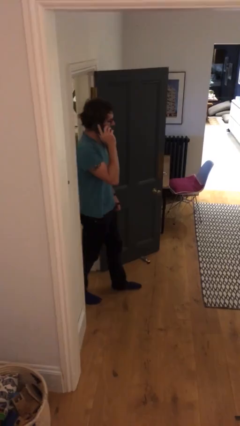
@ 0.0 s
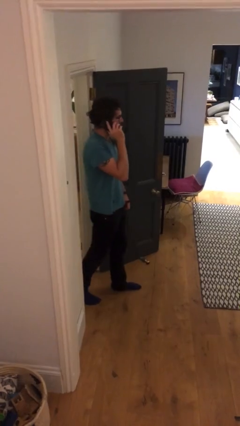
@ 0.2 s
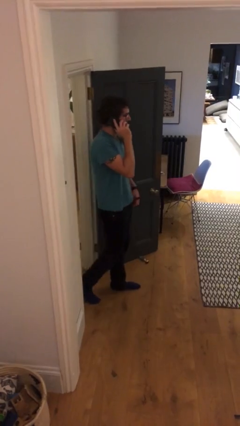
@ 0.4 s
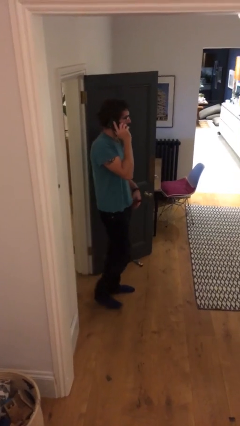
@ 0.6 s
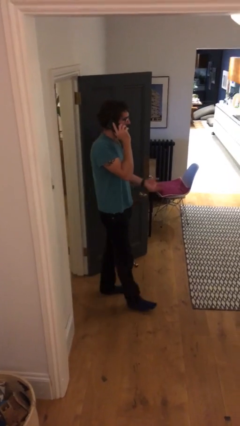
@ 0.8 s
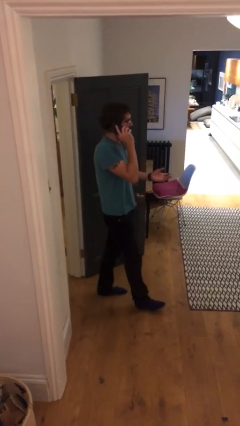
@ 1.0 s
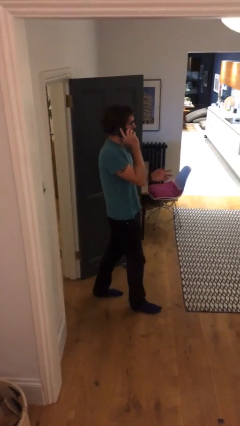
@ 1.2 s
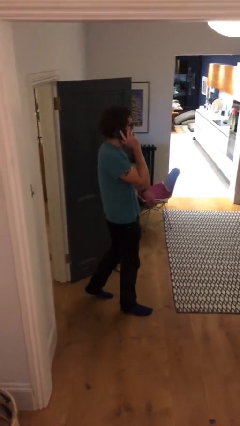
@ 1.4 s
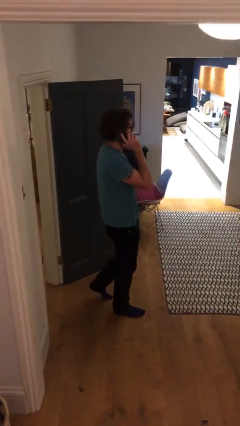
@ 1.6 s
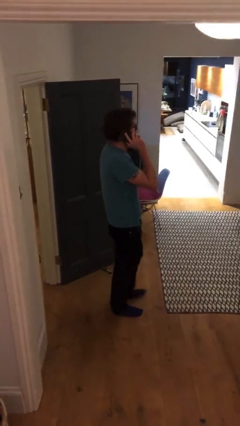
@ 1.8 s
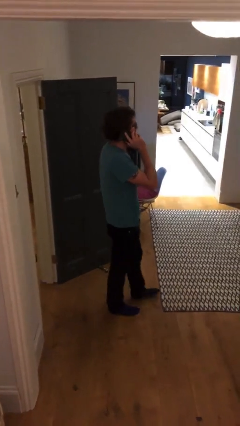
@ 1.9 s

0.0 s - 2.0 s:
person enters scene through structure

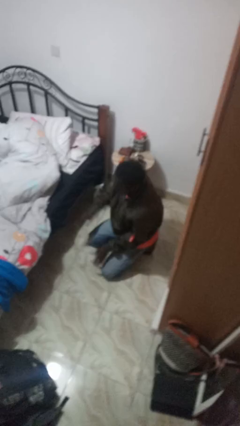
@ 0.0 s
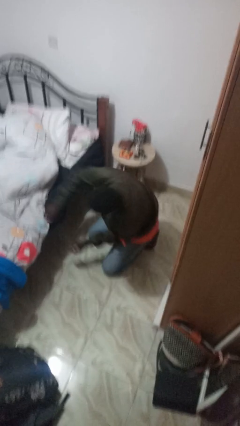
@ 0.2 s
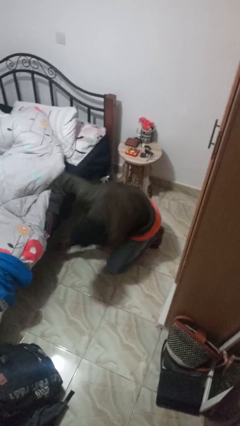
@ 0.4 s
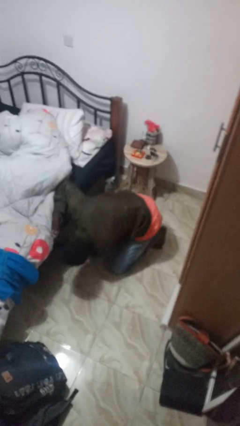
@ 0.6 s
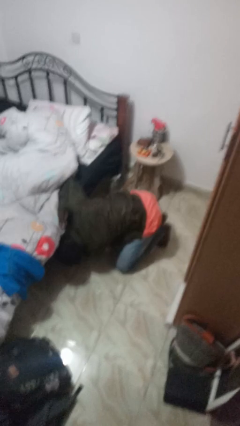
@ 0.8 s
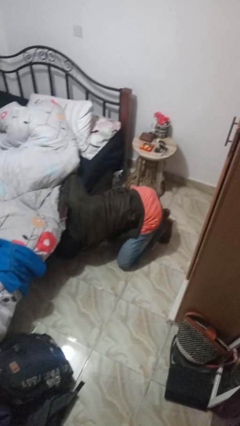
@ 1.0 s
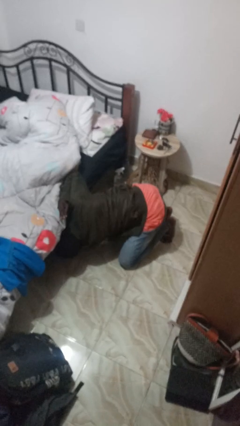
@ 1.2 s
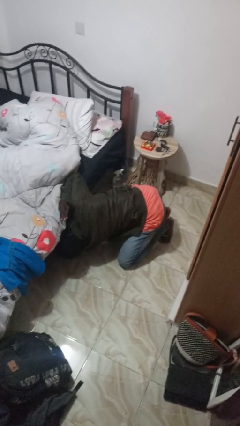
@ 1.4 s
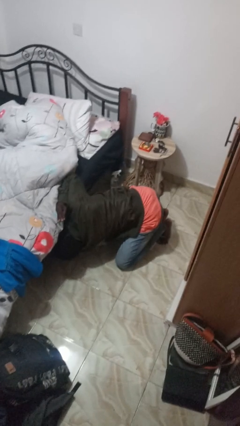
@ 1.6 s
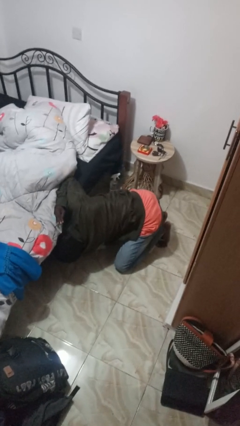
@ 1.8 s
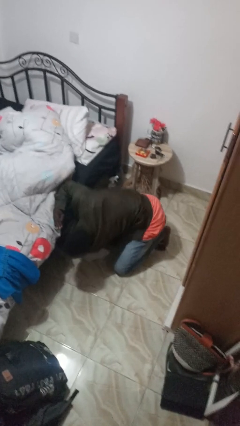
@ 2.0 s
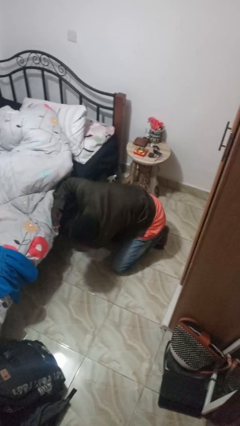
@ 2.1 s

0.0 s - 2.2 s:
person searches under bed

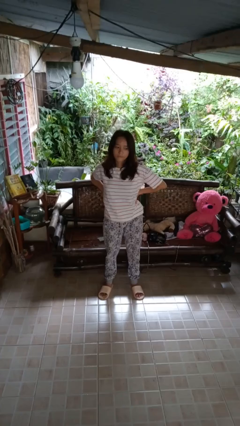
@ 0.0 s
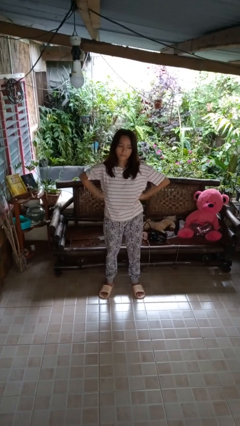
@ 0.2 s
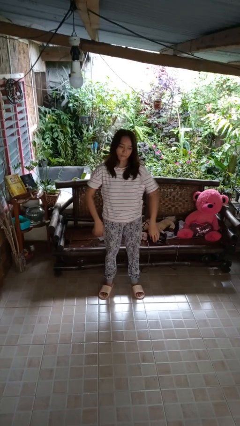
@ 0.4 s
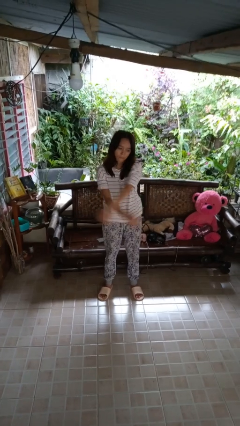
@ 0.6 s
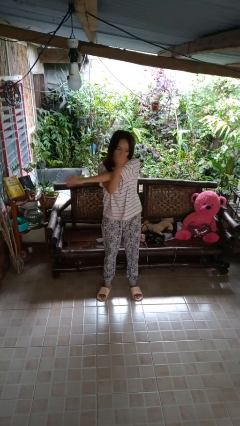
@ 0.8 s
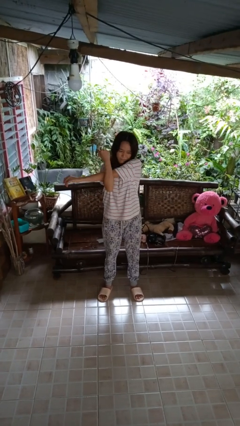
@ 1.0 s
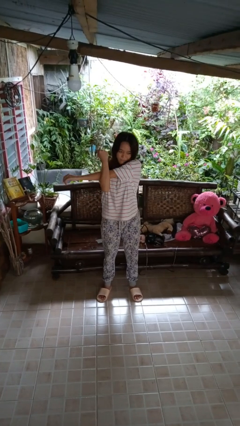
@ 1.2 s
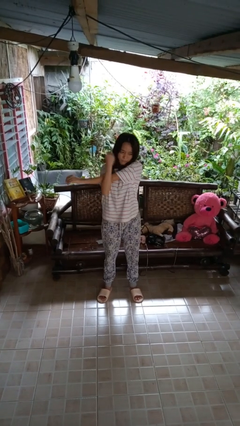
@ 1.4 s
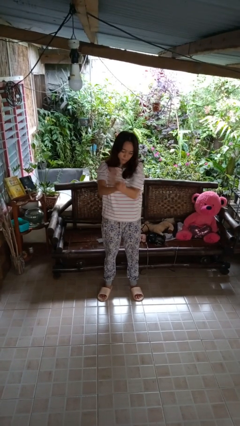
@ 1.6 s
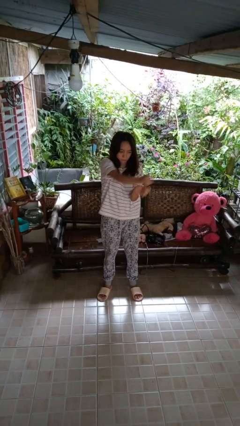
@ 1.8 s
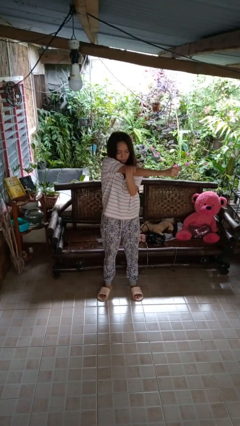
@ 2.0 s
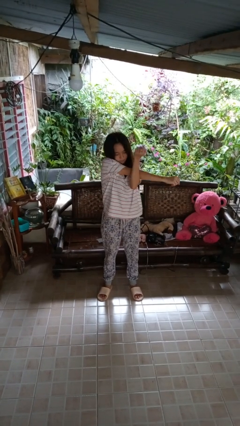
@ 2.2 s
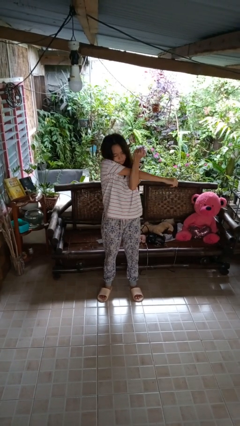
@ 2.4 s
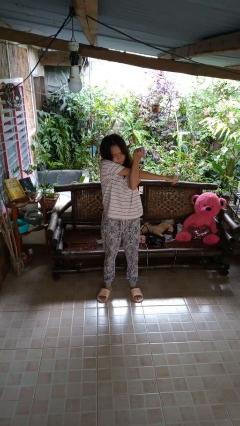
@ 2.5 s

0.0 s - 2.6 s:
person stretches arms to side

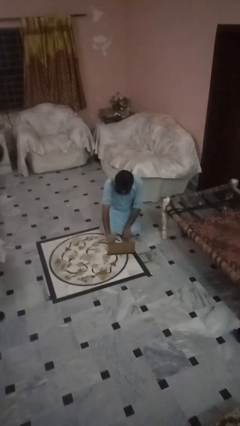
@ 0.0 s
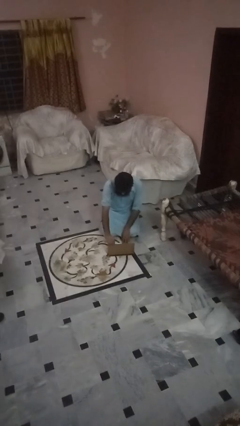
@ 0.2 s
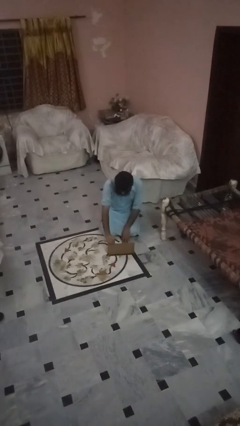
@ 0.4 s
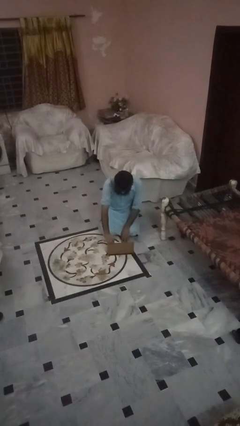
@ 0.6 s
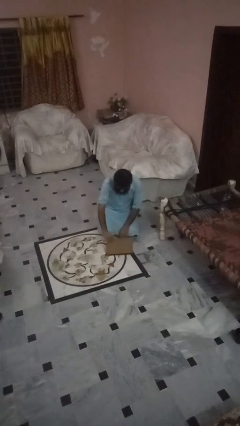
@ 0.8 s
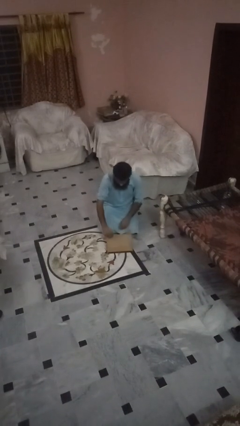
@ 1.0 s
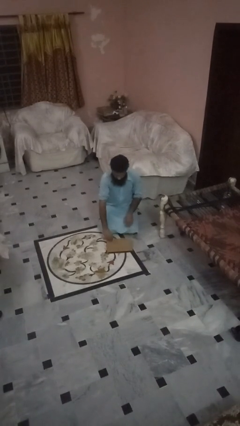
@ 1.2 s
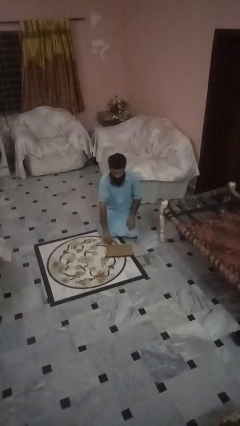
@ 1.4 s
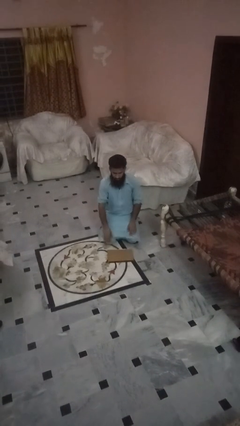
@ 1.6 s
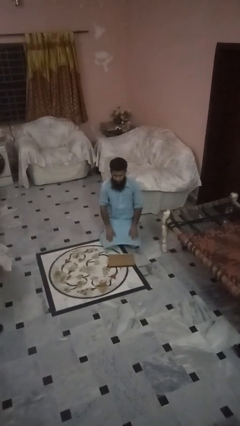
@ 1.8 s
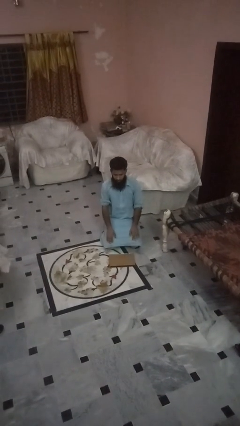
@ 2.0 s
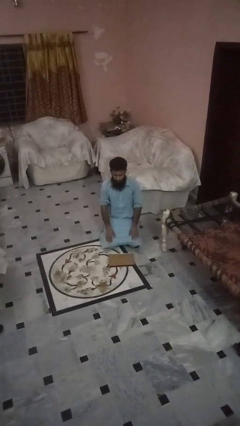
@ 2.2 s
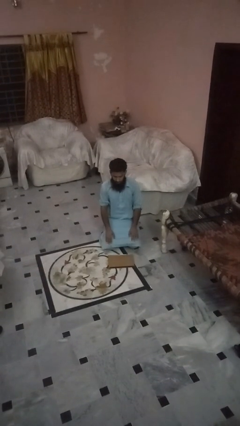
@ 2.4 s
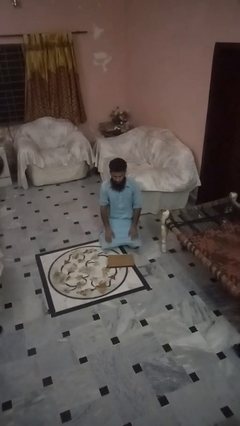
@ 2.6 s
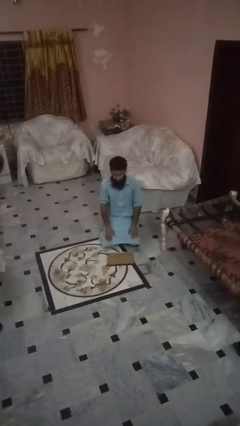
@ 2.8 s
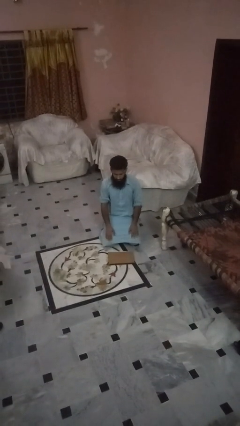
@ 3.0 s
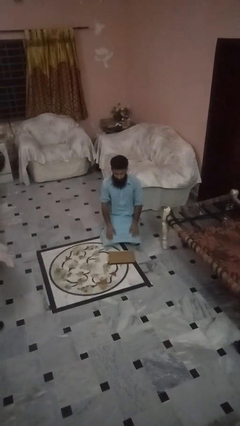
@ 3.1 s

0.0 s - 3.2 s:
person closes laptop

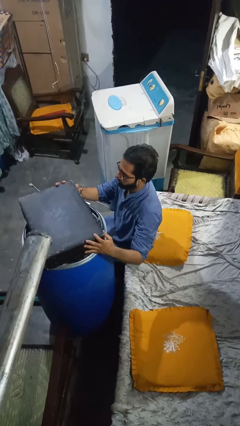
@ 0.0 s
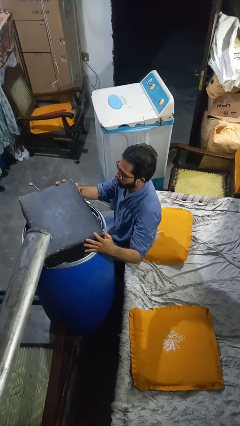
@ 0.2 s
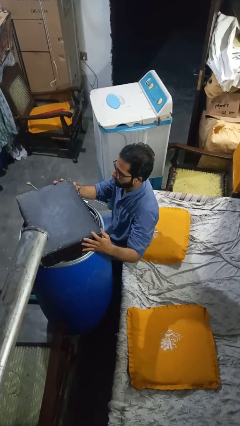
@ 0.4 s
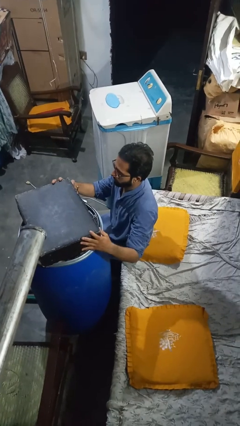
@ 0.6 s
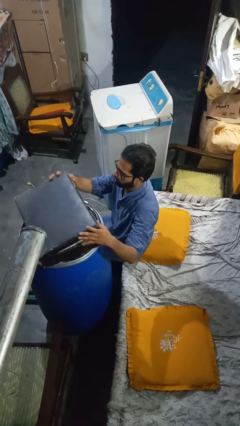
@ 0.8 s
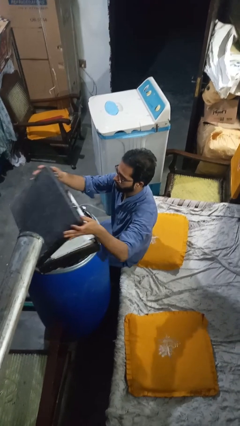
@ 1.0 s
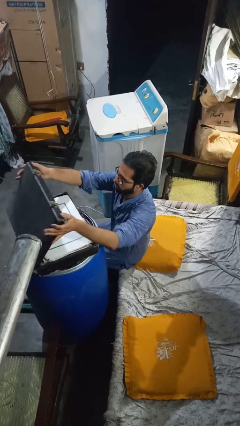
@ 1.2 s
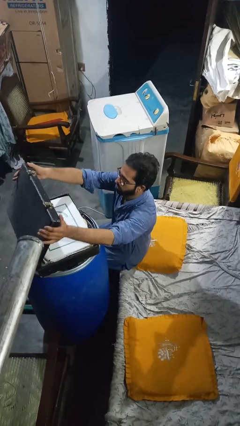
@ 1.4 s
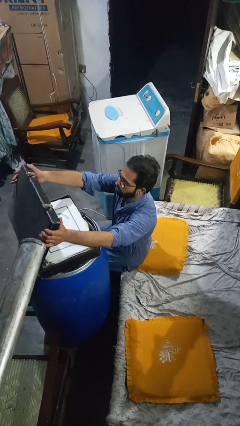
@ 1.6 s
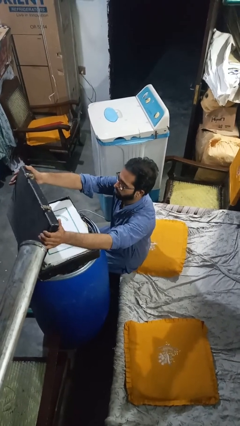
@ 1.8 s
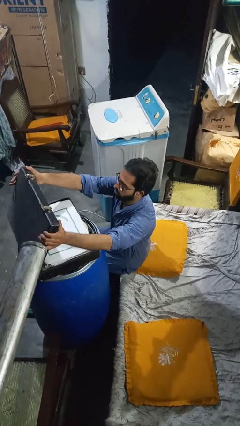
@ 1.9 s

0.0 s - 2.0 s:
person opens suitcase

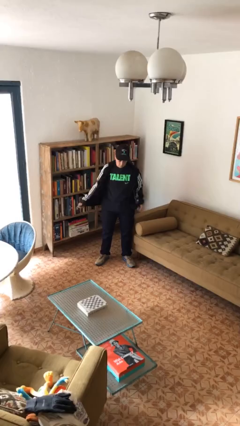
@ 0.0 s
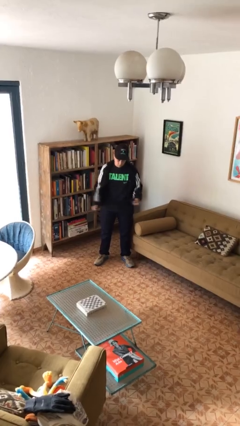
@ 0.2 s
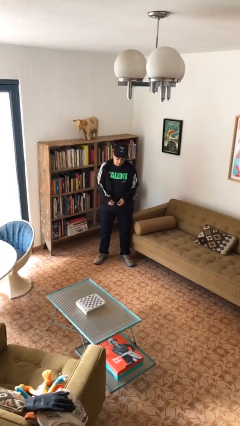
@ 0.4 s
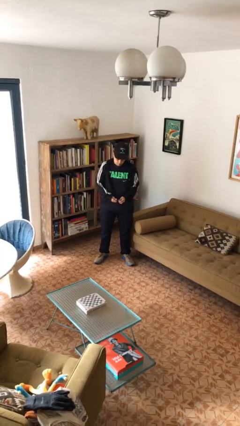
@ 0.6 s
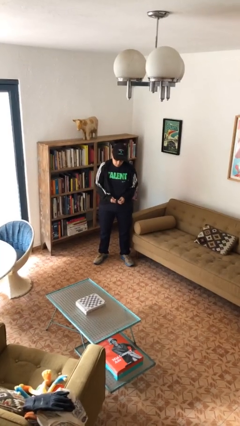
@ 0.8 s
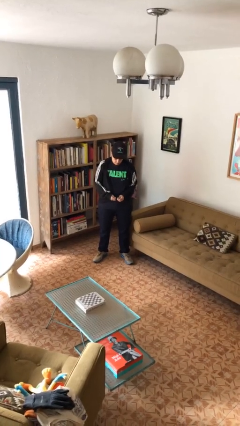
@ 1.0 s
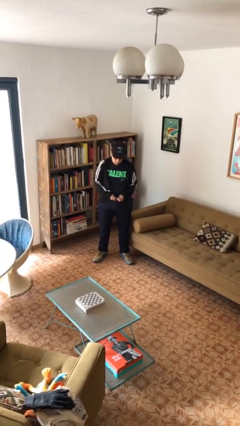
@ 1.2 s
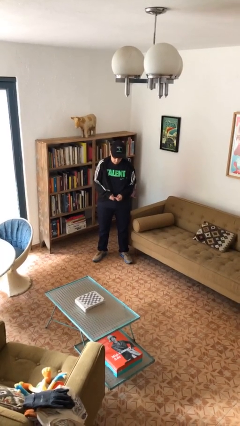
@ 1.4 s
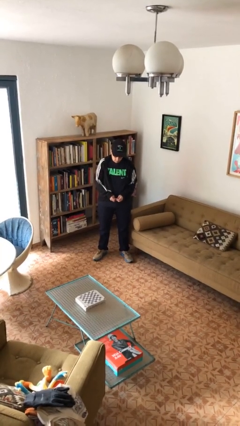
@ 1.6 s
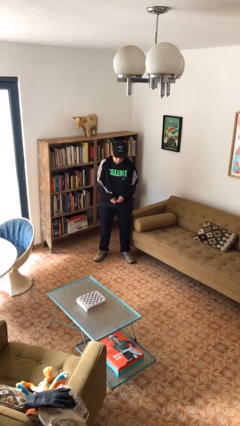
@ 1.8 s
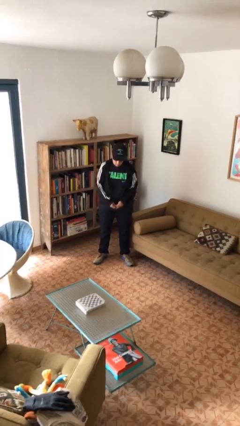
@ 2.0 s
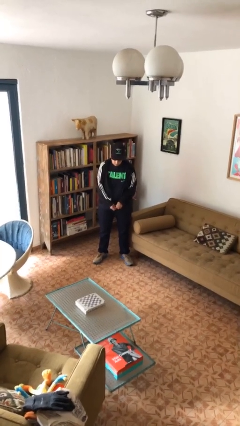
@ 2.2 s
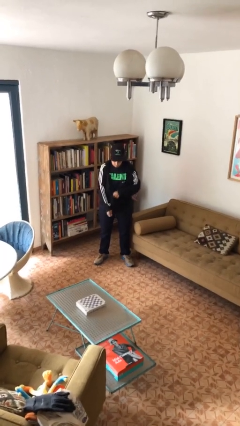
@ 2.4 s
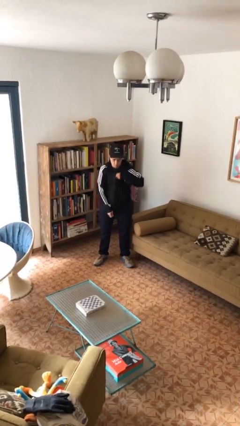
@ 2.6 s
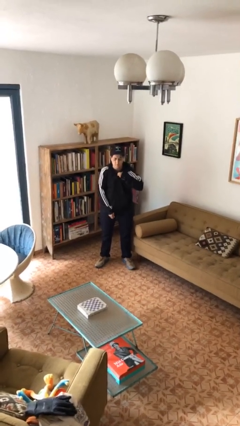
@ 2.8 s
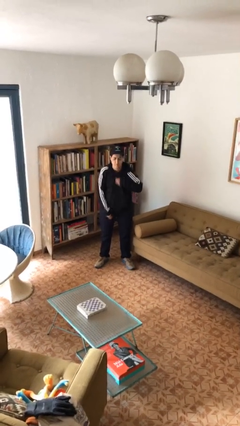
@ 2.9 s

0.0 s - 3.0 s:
person zips up jacket

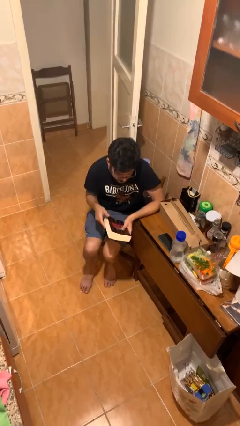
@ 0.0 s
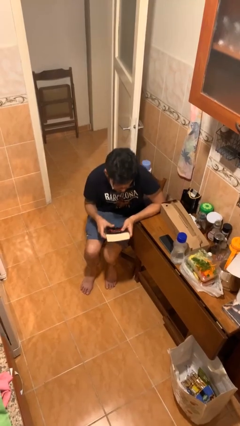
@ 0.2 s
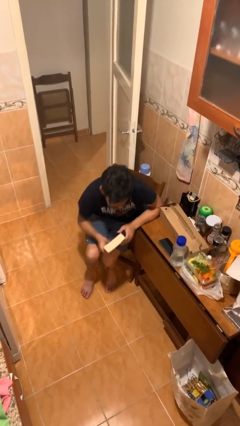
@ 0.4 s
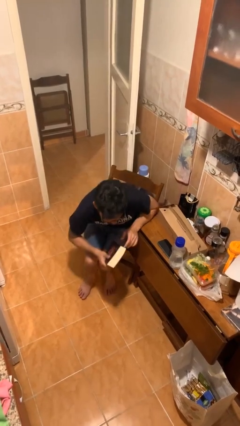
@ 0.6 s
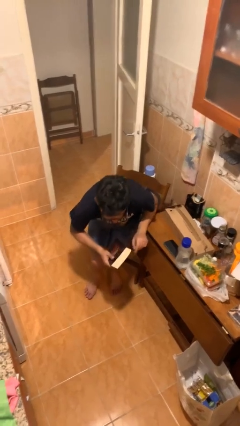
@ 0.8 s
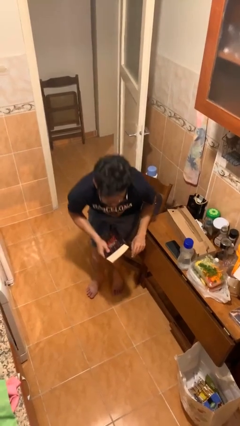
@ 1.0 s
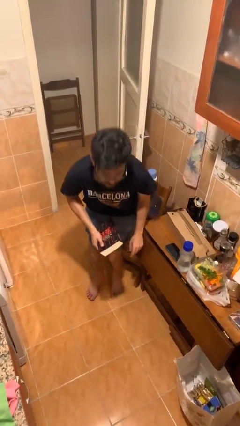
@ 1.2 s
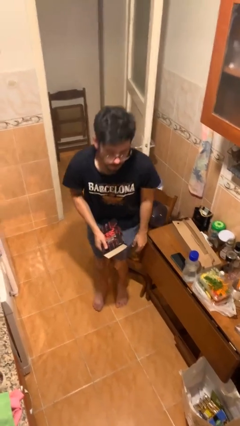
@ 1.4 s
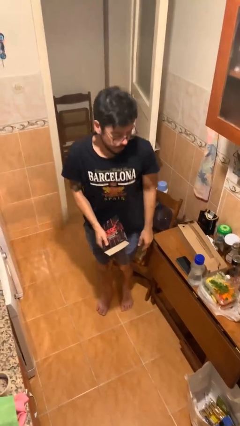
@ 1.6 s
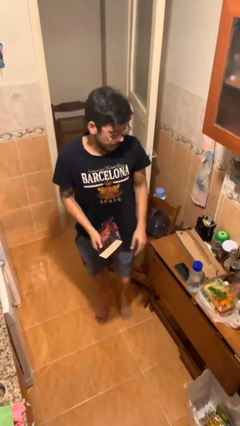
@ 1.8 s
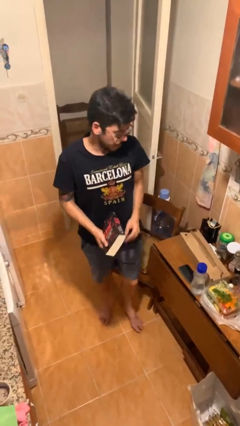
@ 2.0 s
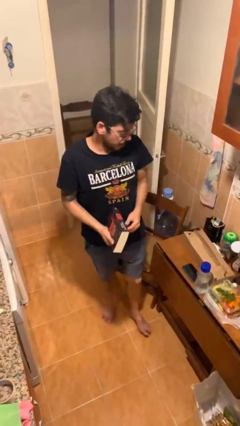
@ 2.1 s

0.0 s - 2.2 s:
person stands up
